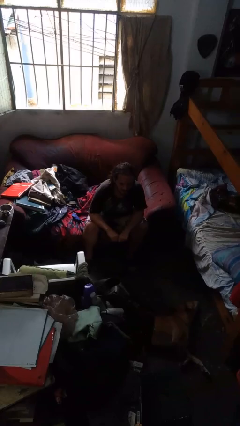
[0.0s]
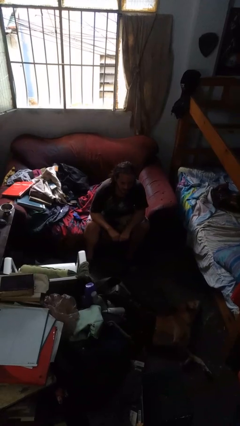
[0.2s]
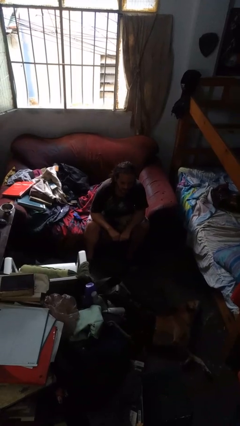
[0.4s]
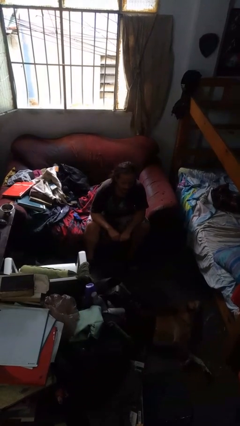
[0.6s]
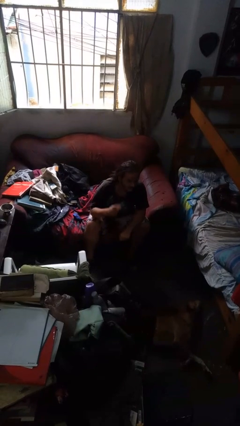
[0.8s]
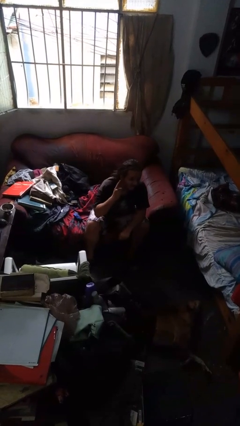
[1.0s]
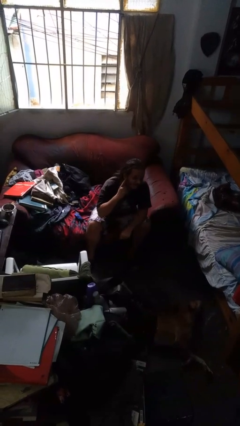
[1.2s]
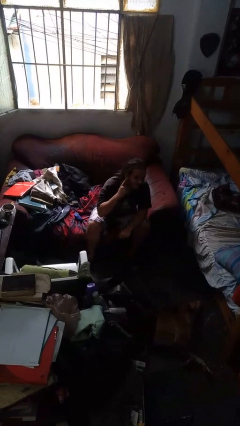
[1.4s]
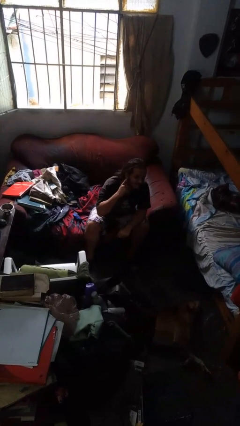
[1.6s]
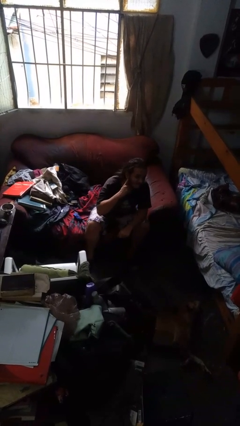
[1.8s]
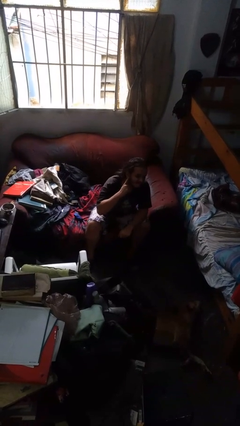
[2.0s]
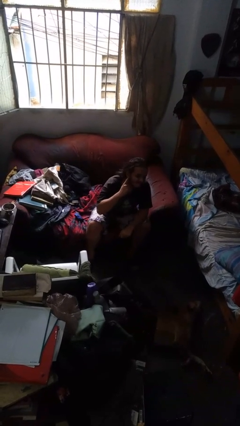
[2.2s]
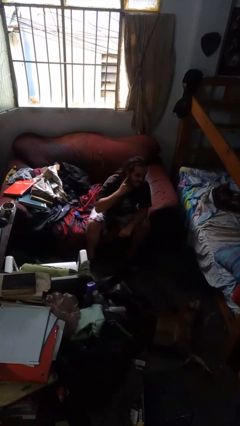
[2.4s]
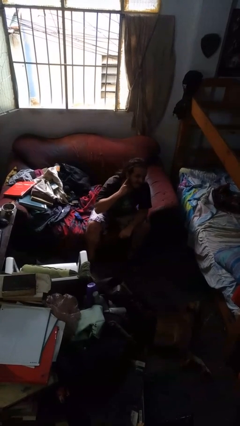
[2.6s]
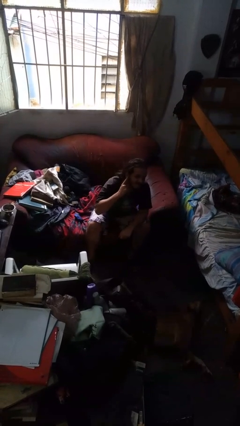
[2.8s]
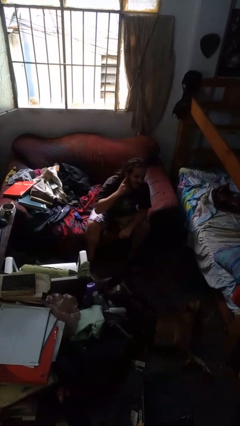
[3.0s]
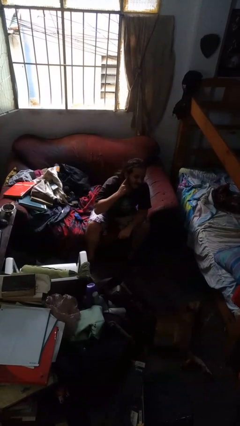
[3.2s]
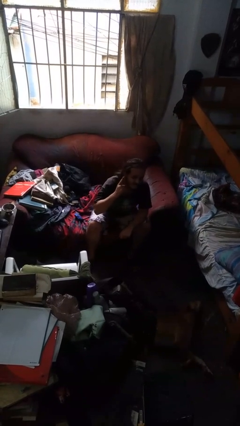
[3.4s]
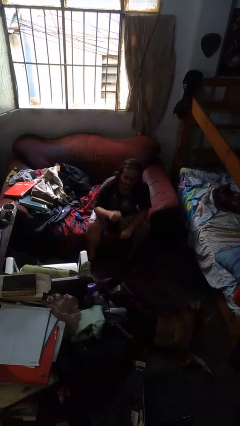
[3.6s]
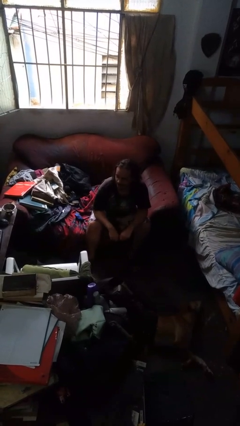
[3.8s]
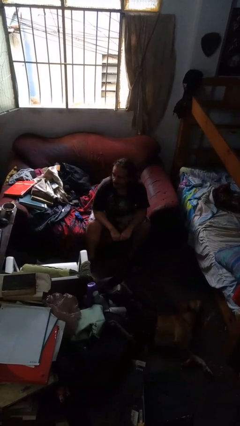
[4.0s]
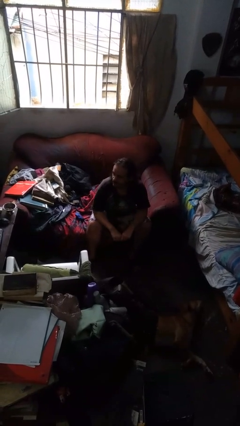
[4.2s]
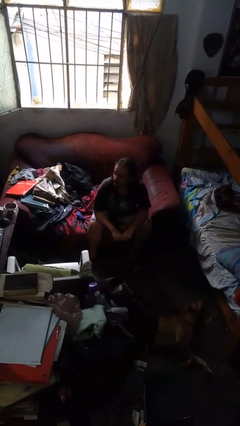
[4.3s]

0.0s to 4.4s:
person gestures listen closely

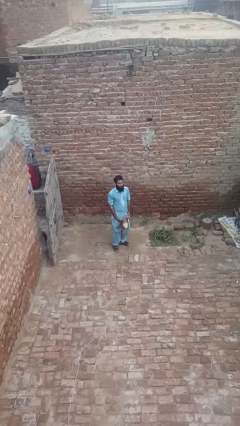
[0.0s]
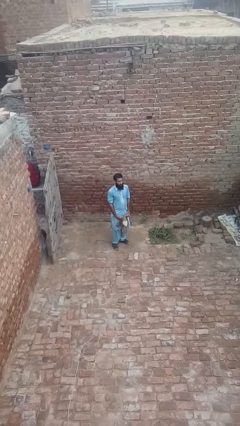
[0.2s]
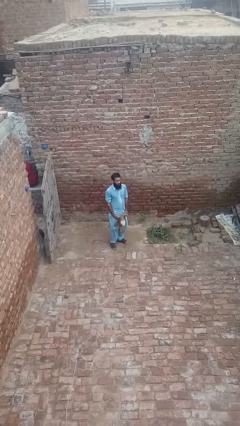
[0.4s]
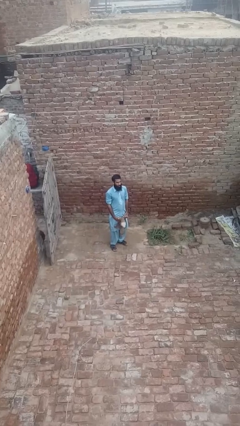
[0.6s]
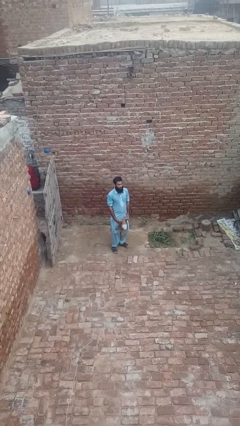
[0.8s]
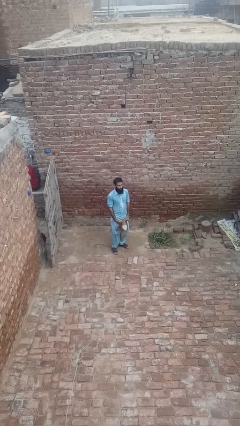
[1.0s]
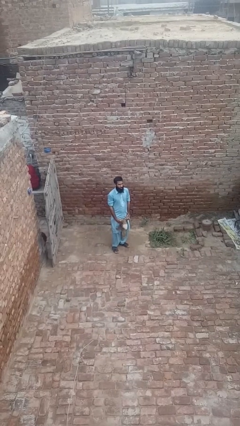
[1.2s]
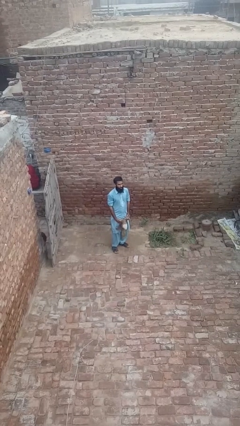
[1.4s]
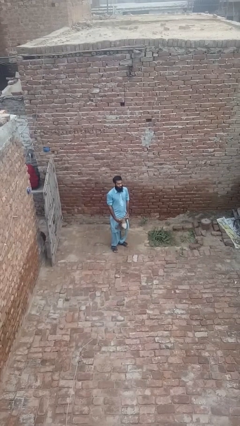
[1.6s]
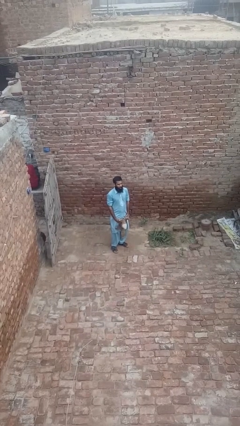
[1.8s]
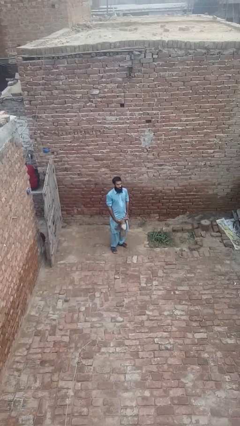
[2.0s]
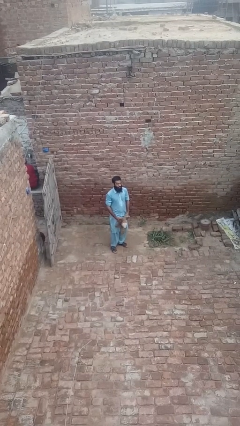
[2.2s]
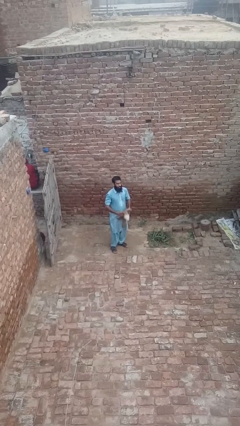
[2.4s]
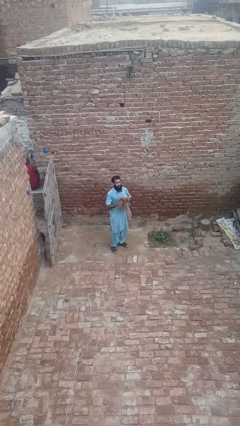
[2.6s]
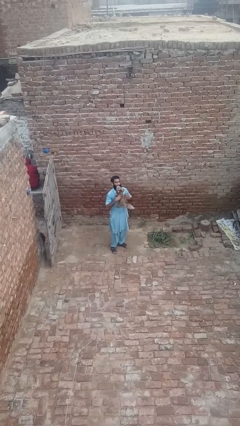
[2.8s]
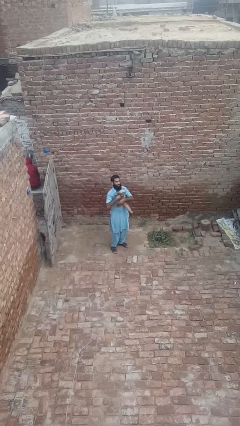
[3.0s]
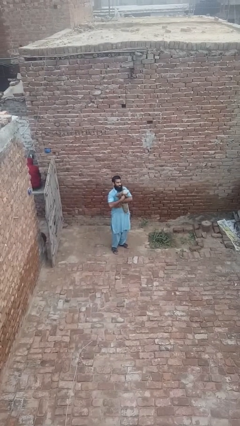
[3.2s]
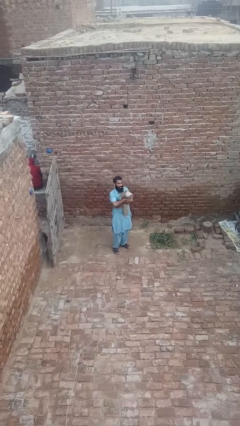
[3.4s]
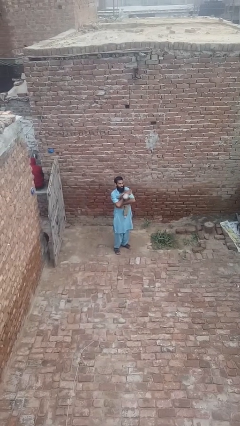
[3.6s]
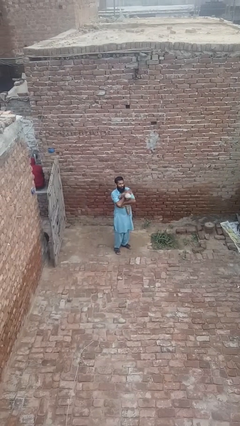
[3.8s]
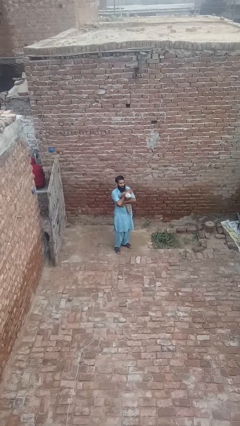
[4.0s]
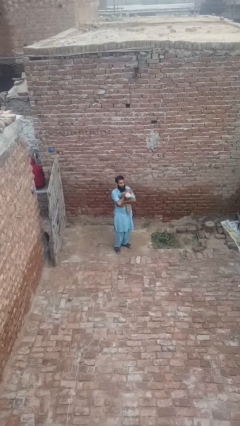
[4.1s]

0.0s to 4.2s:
person hugs stuffed animal

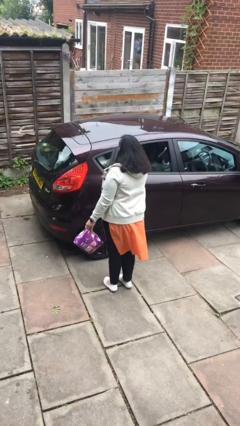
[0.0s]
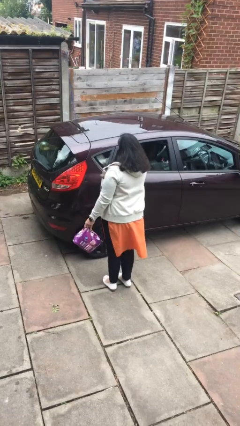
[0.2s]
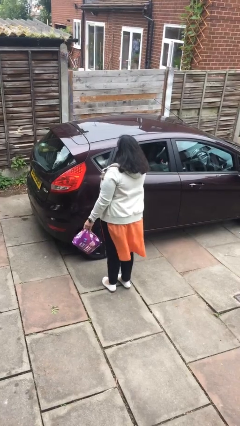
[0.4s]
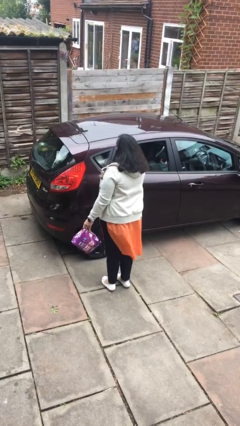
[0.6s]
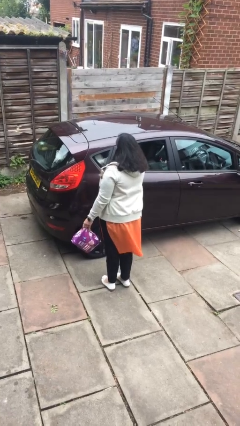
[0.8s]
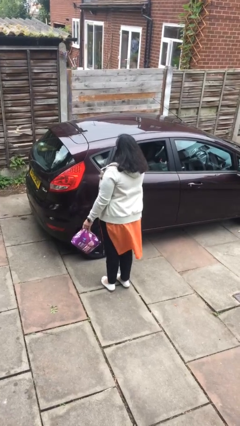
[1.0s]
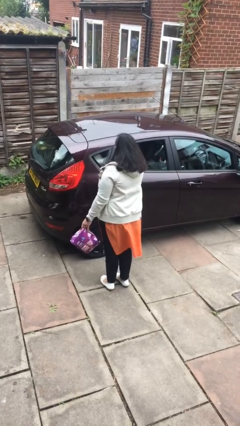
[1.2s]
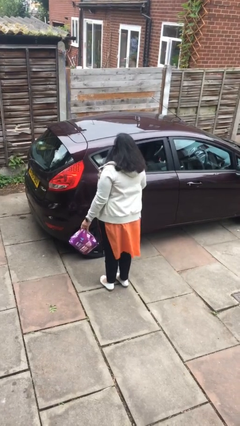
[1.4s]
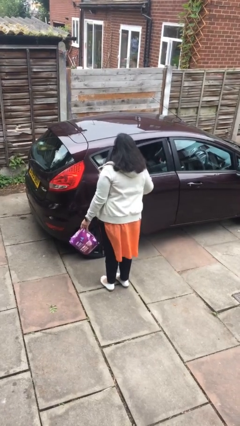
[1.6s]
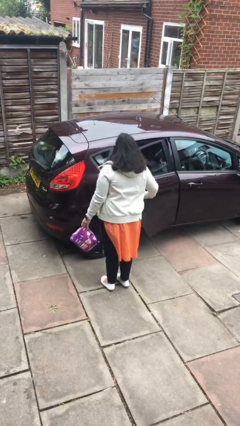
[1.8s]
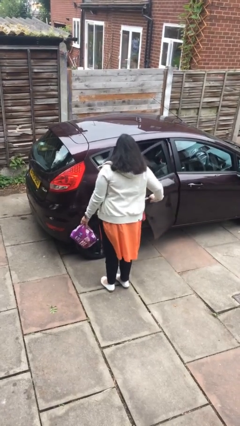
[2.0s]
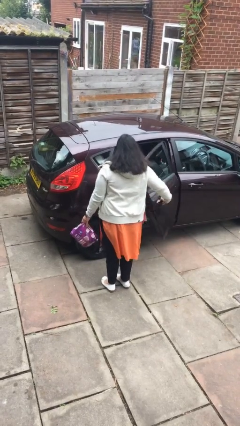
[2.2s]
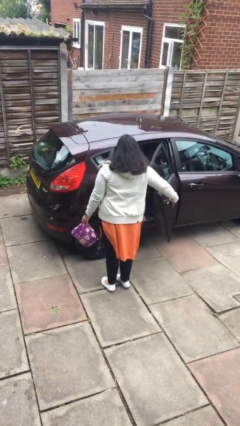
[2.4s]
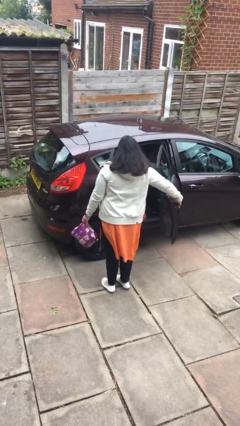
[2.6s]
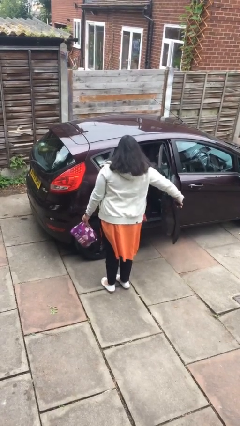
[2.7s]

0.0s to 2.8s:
person opens car door

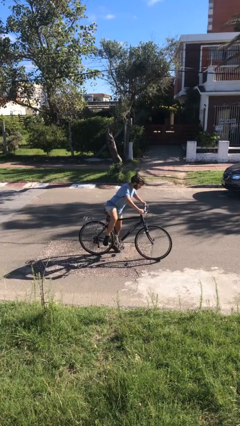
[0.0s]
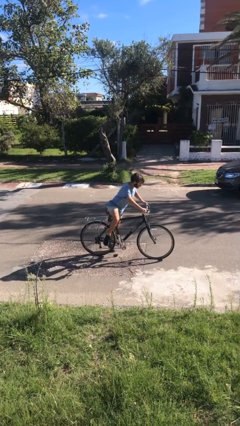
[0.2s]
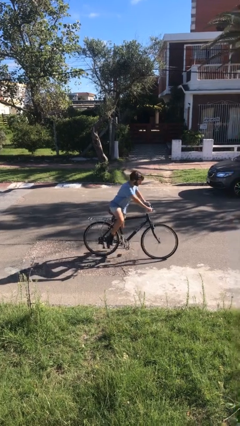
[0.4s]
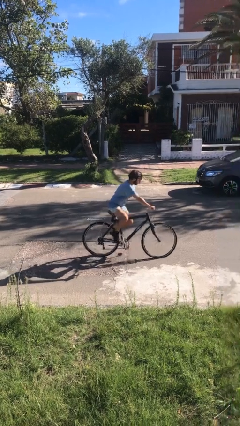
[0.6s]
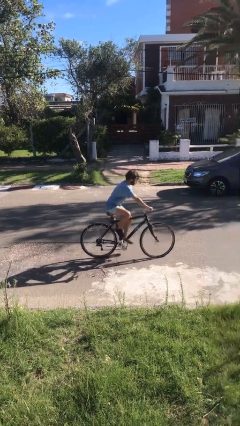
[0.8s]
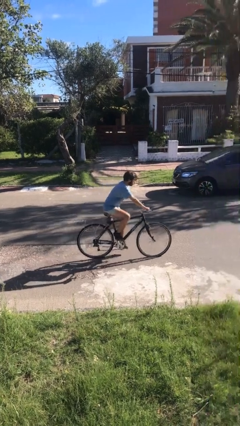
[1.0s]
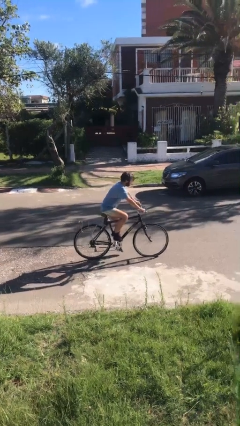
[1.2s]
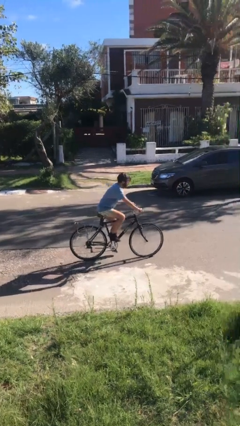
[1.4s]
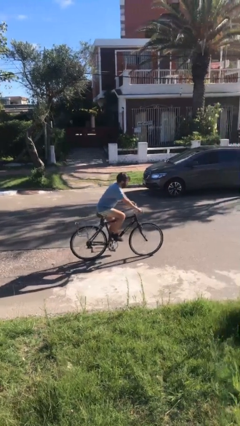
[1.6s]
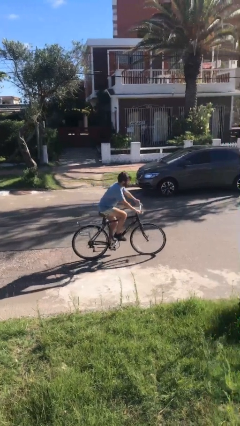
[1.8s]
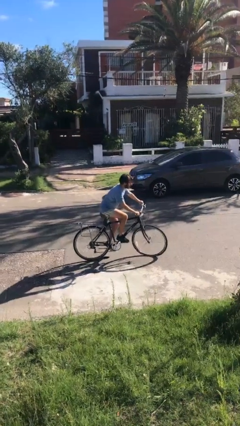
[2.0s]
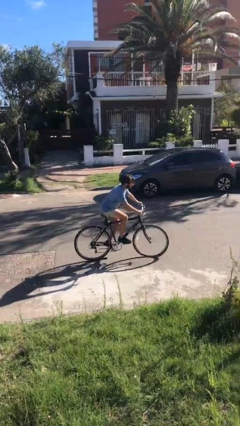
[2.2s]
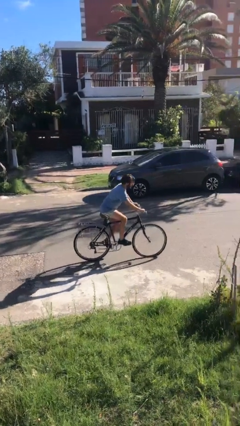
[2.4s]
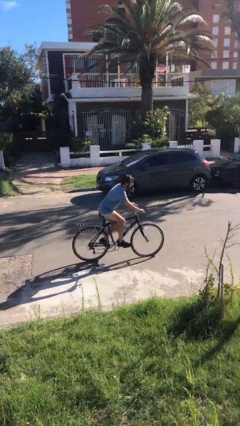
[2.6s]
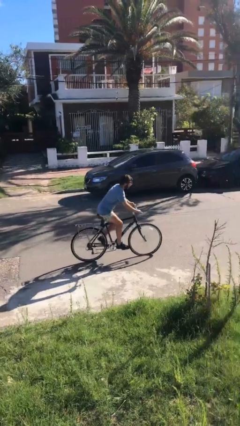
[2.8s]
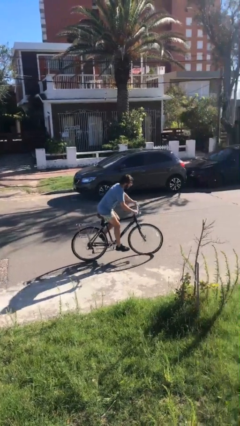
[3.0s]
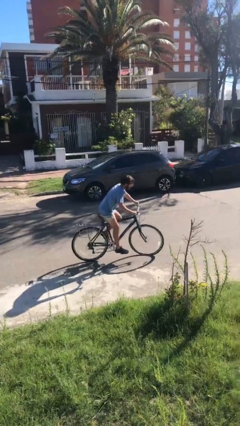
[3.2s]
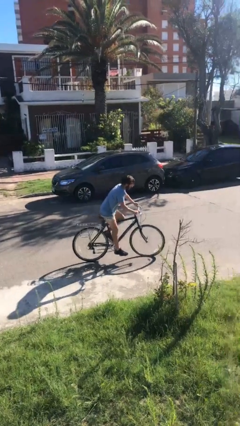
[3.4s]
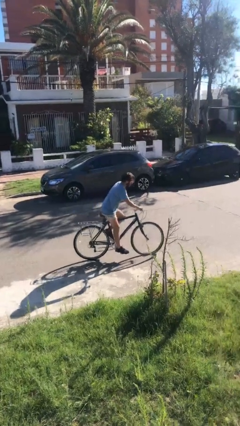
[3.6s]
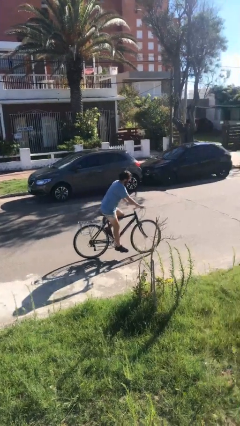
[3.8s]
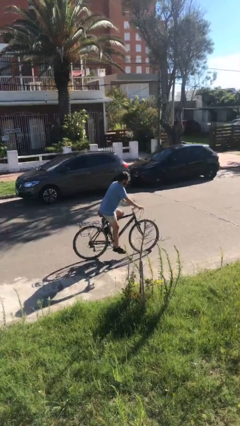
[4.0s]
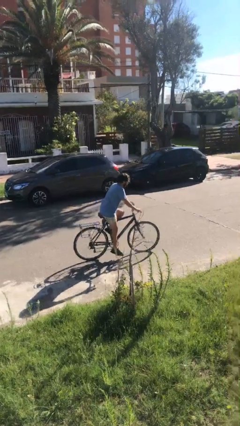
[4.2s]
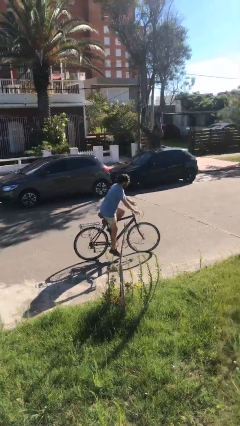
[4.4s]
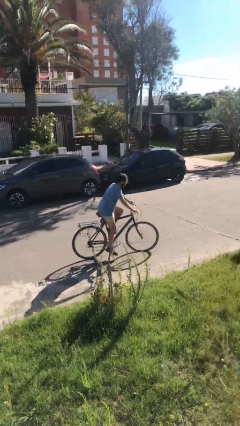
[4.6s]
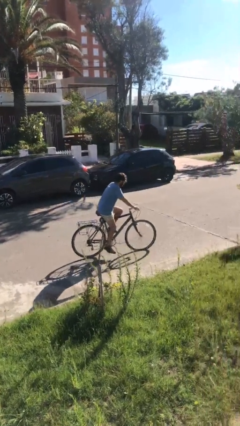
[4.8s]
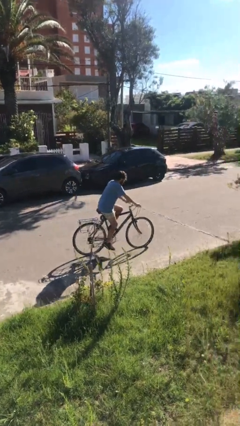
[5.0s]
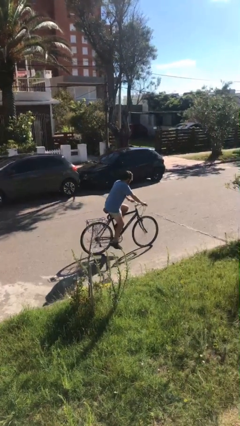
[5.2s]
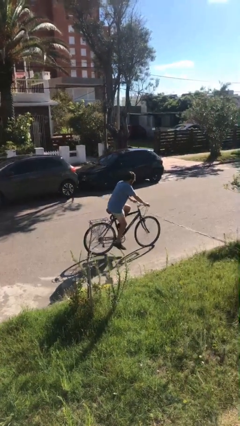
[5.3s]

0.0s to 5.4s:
person rides bicycle

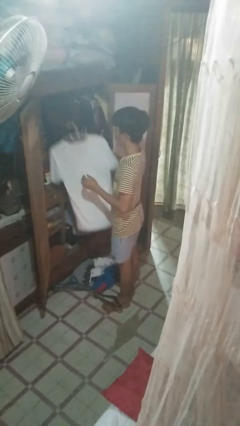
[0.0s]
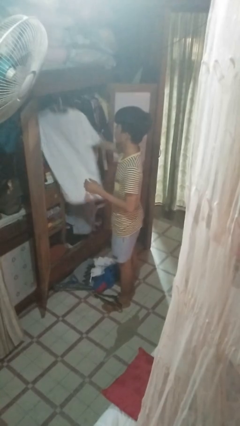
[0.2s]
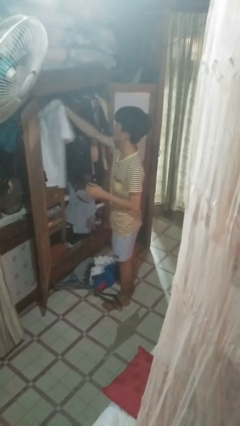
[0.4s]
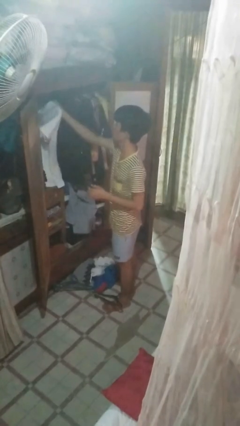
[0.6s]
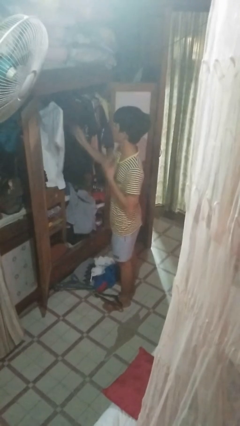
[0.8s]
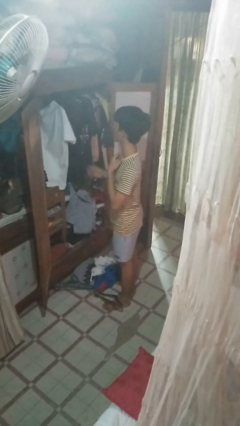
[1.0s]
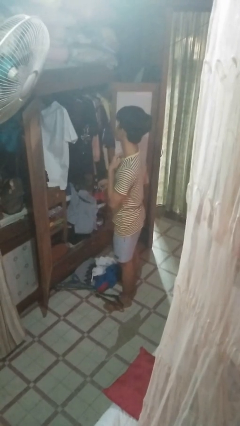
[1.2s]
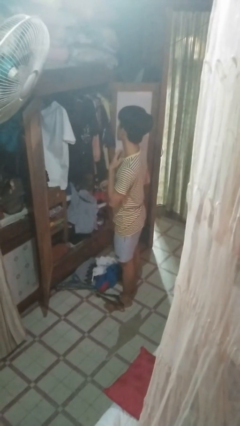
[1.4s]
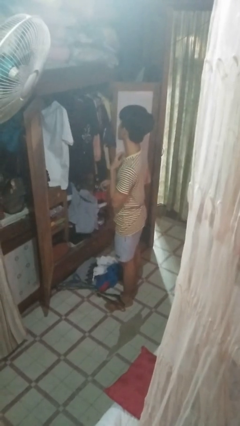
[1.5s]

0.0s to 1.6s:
person puts clothes into closet
